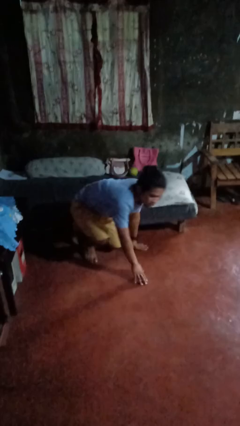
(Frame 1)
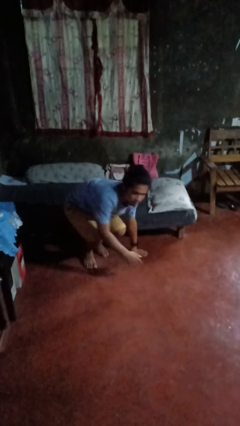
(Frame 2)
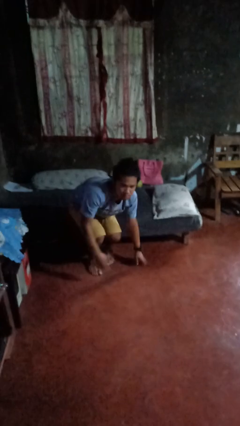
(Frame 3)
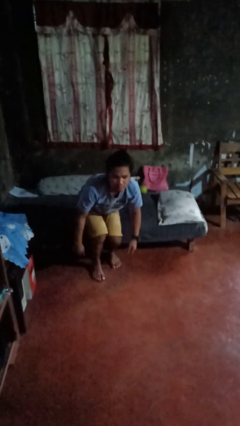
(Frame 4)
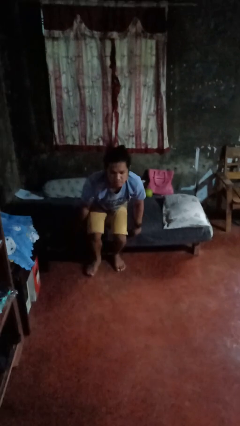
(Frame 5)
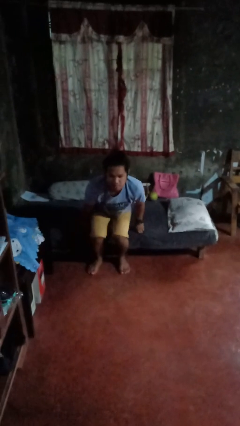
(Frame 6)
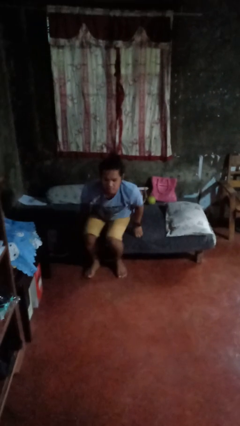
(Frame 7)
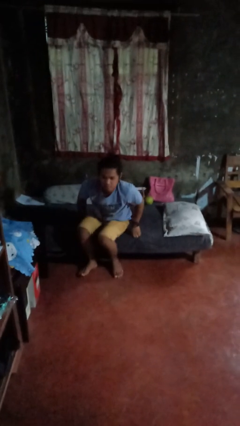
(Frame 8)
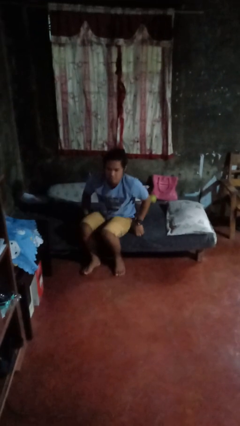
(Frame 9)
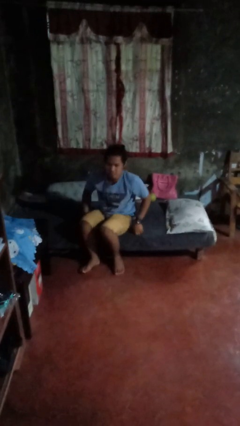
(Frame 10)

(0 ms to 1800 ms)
person stands up from floor

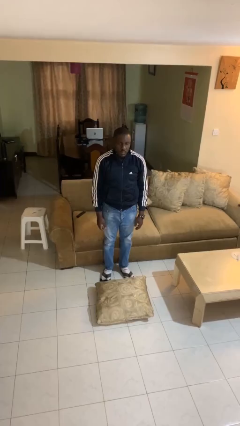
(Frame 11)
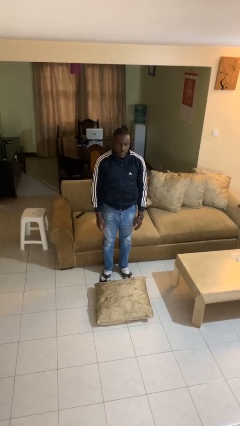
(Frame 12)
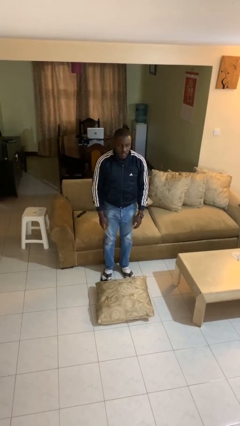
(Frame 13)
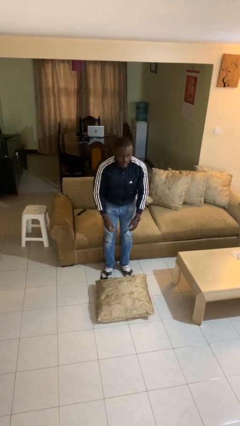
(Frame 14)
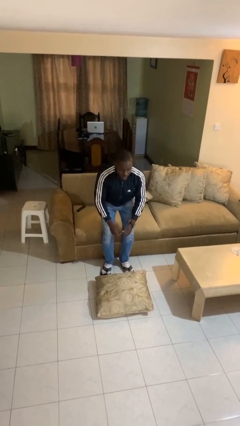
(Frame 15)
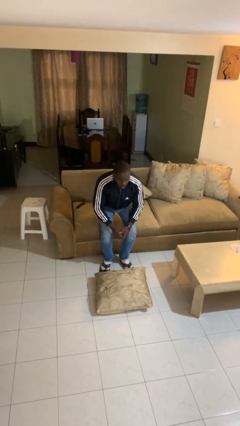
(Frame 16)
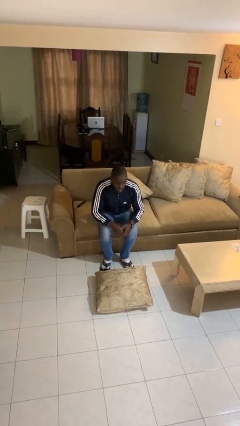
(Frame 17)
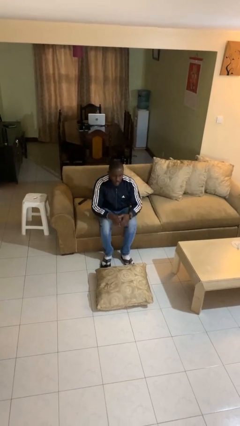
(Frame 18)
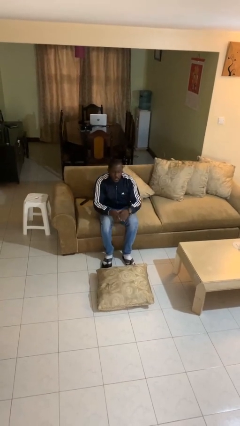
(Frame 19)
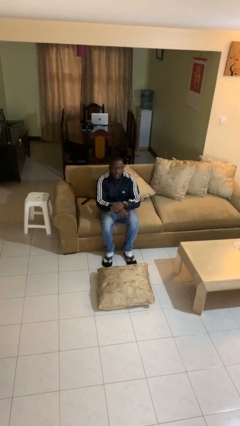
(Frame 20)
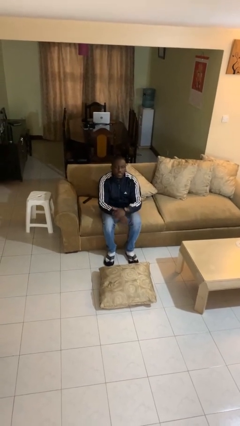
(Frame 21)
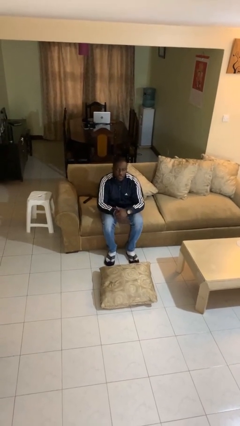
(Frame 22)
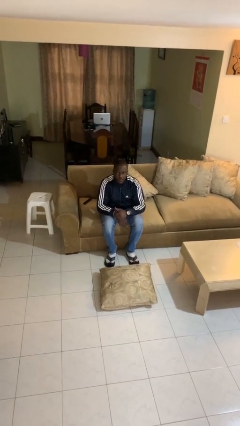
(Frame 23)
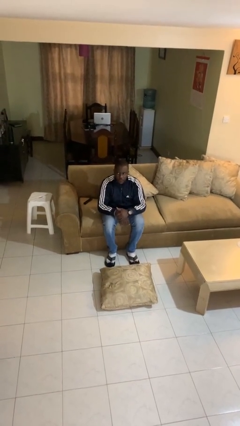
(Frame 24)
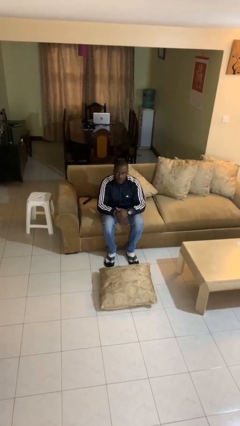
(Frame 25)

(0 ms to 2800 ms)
person sits down

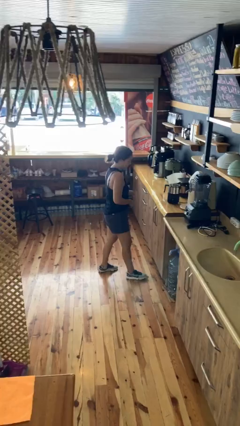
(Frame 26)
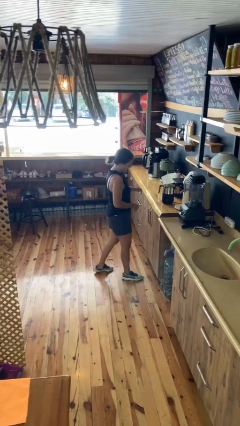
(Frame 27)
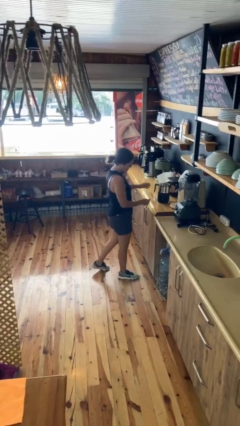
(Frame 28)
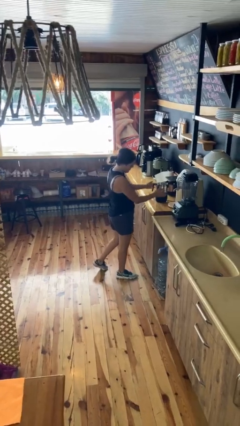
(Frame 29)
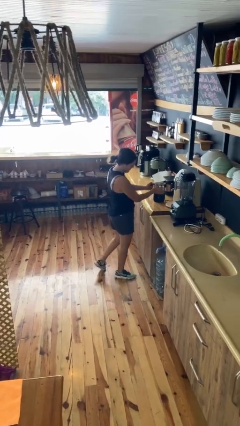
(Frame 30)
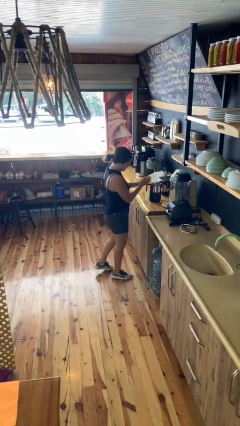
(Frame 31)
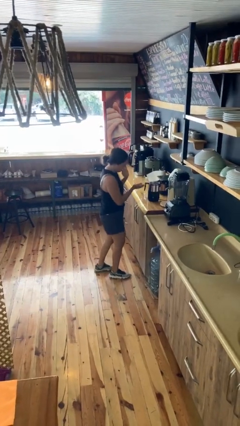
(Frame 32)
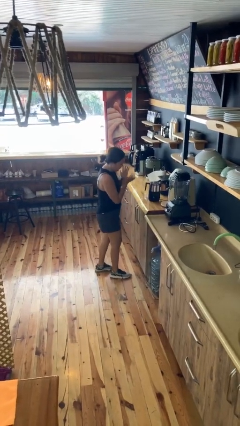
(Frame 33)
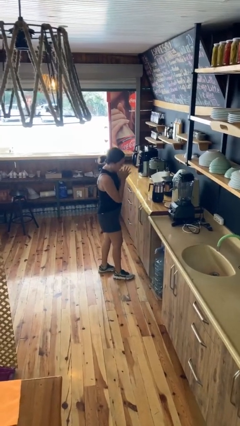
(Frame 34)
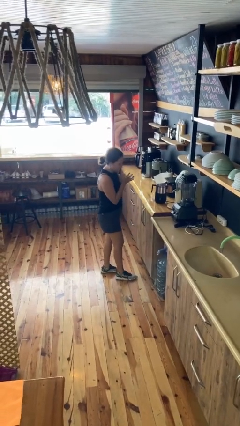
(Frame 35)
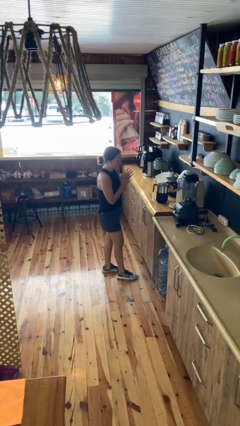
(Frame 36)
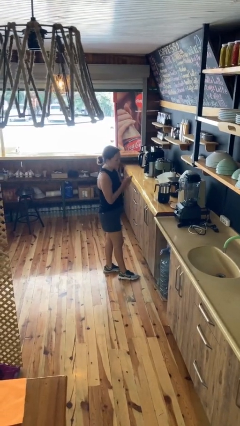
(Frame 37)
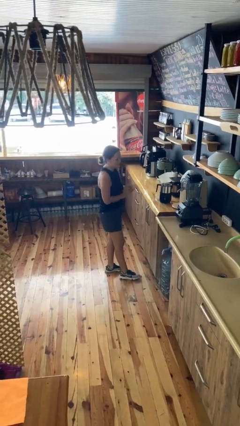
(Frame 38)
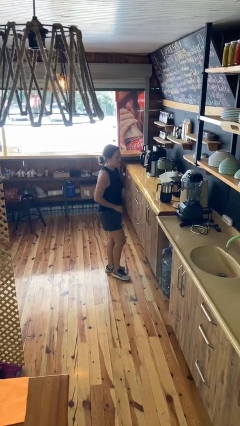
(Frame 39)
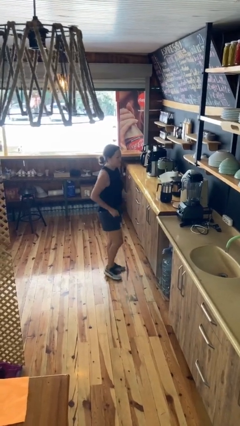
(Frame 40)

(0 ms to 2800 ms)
person burns hand

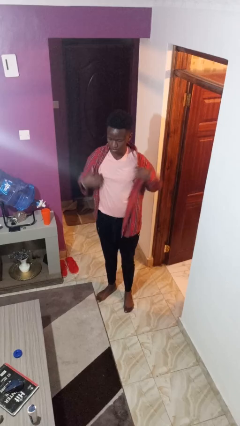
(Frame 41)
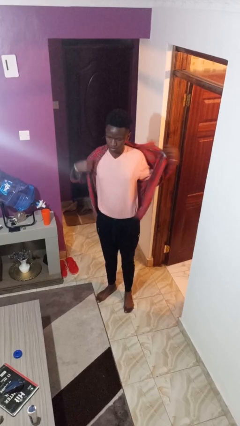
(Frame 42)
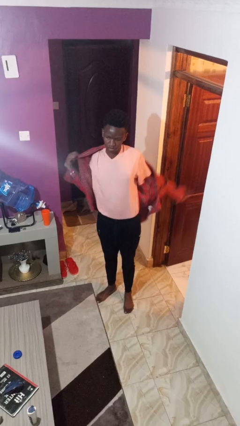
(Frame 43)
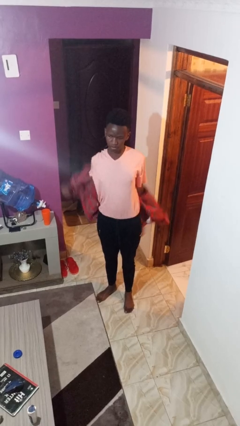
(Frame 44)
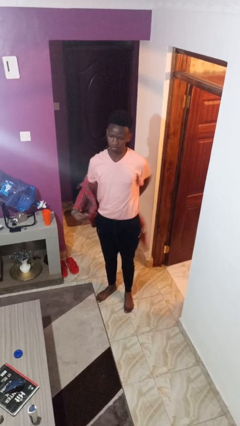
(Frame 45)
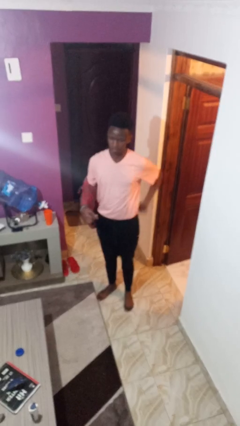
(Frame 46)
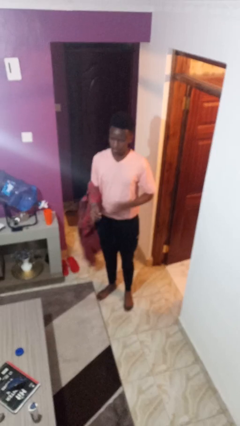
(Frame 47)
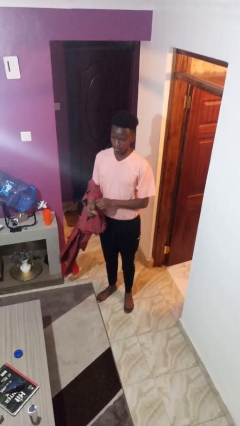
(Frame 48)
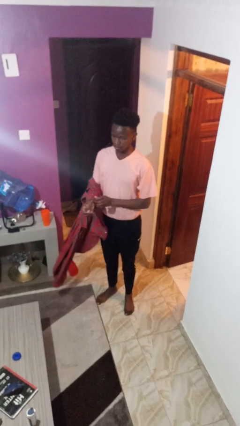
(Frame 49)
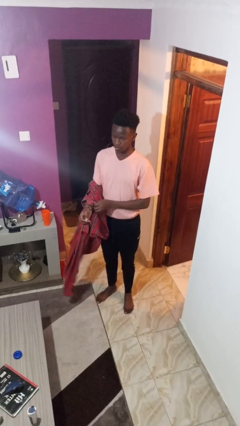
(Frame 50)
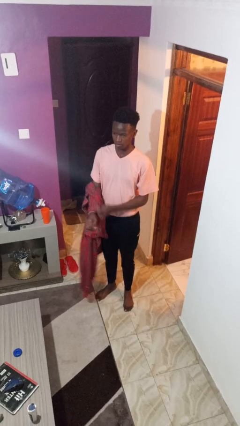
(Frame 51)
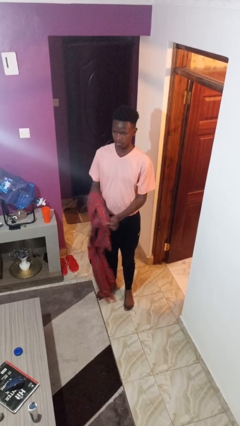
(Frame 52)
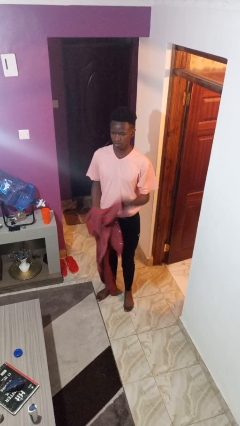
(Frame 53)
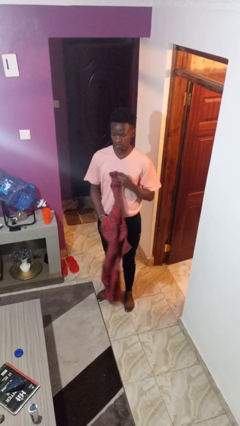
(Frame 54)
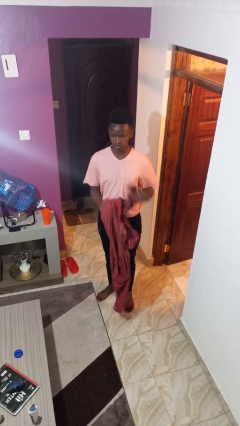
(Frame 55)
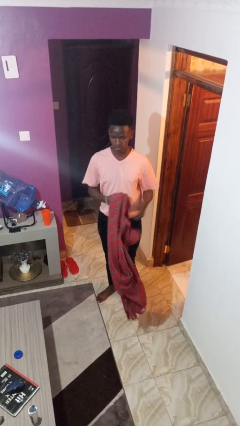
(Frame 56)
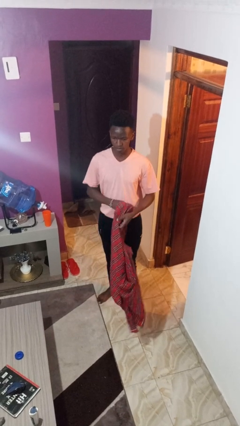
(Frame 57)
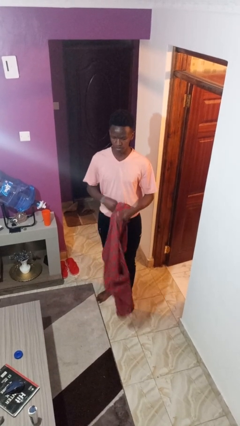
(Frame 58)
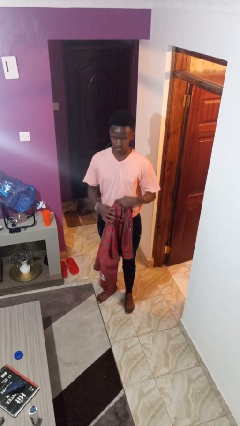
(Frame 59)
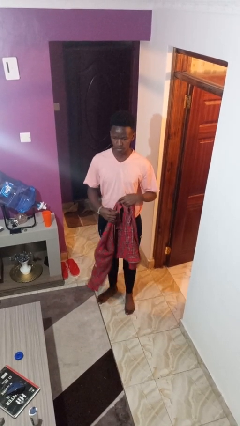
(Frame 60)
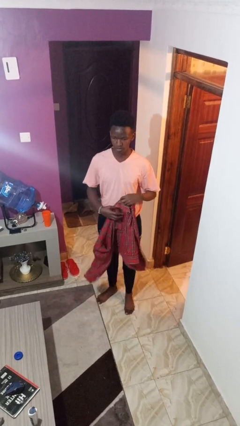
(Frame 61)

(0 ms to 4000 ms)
person takes off shirt

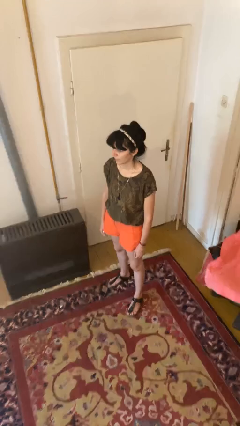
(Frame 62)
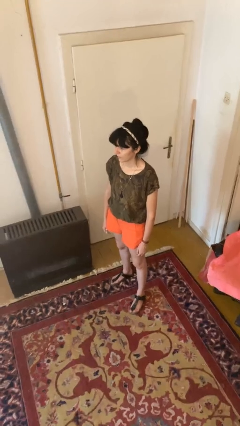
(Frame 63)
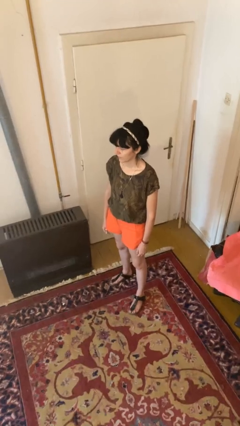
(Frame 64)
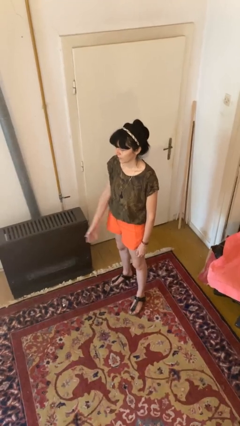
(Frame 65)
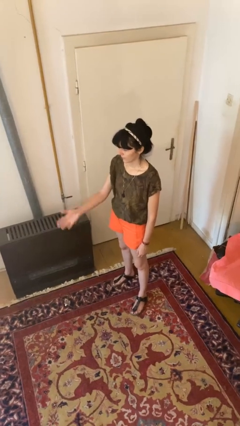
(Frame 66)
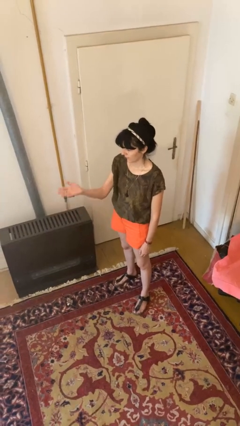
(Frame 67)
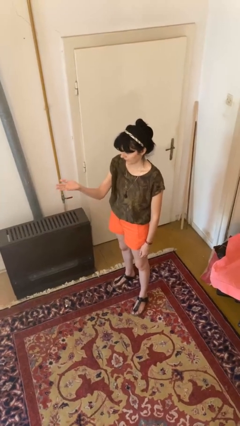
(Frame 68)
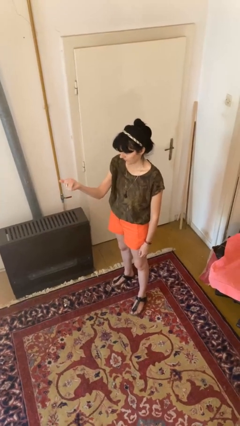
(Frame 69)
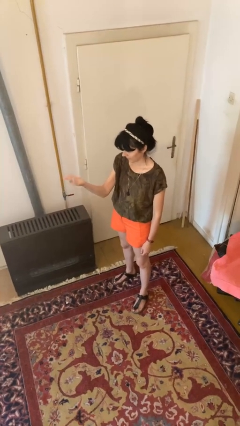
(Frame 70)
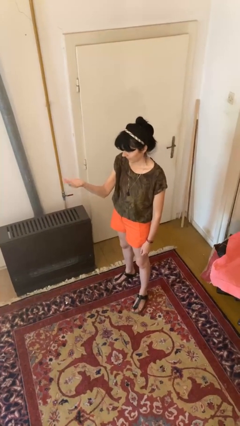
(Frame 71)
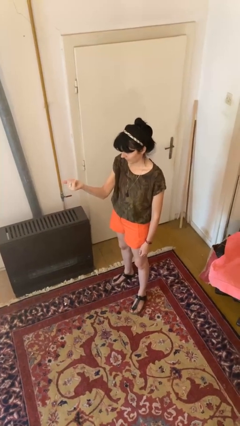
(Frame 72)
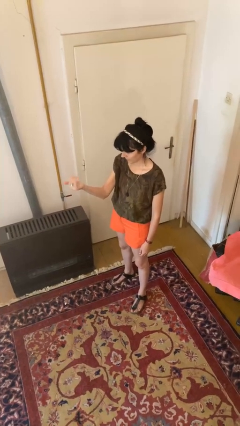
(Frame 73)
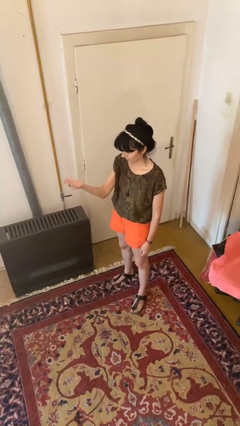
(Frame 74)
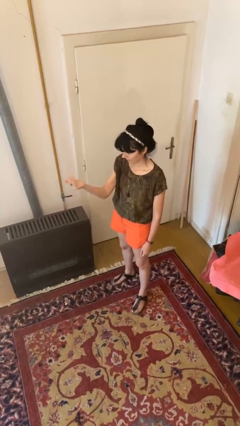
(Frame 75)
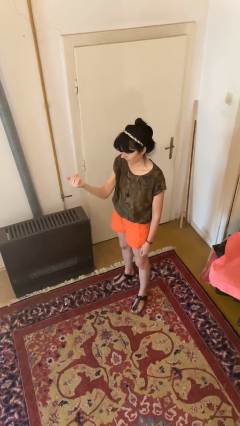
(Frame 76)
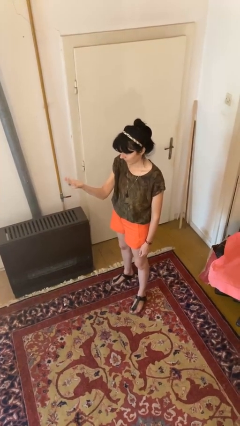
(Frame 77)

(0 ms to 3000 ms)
person gestures come here

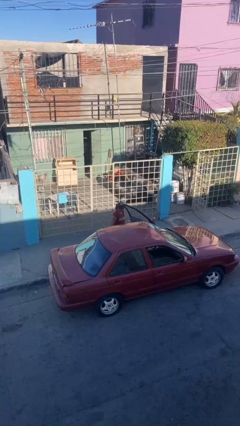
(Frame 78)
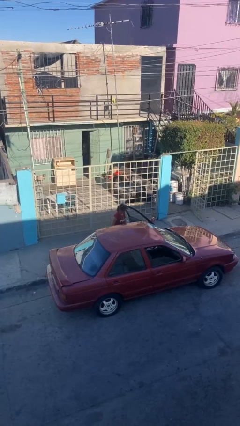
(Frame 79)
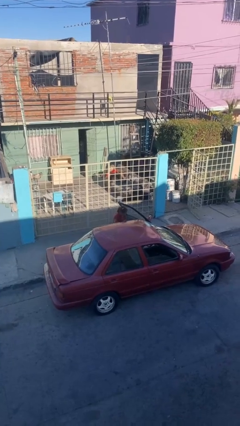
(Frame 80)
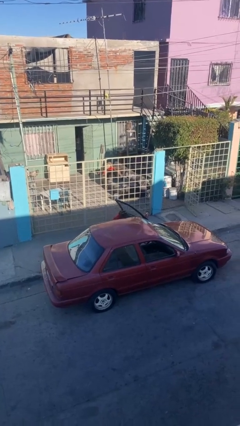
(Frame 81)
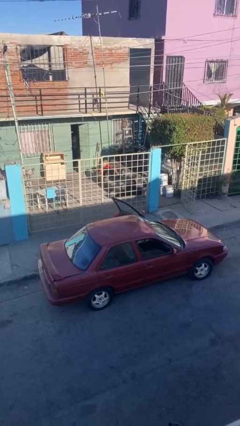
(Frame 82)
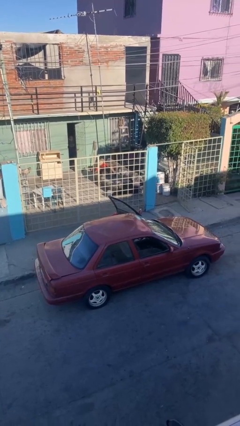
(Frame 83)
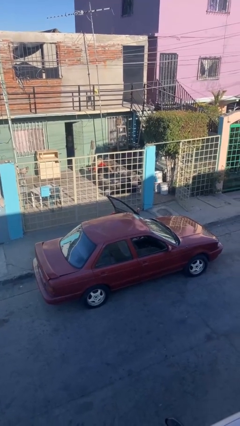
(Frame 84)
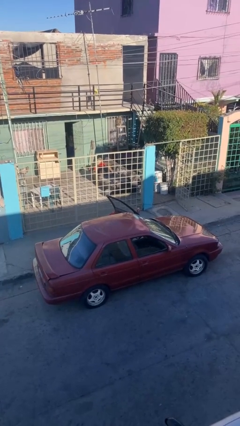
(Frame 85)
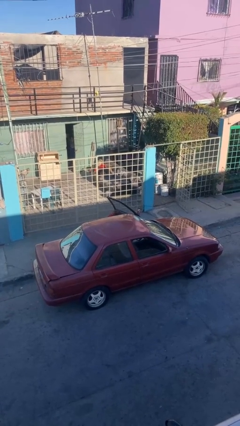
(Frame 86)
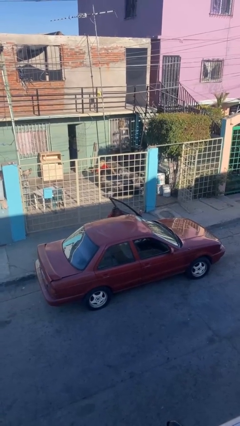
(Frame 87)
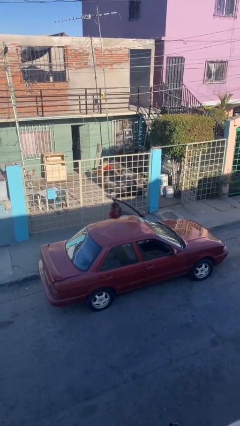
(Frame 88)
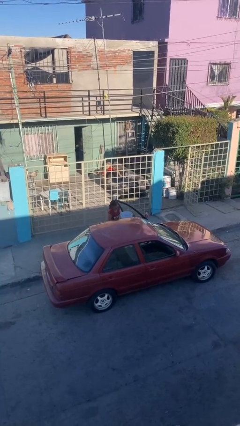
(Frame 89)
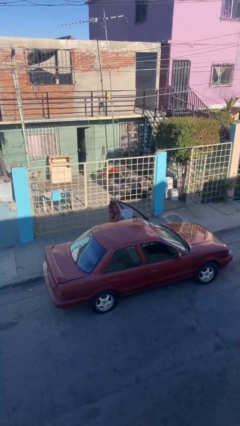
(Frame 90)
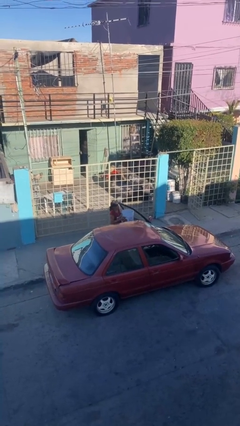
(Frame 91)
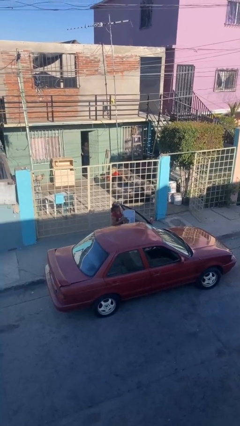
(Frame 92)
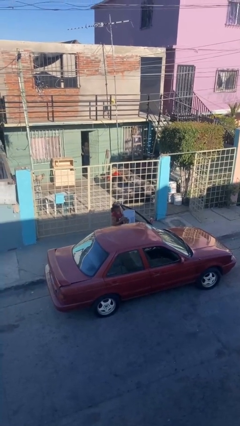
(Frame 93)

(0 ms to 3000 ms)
person unloads car
